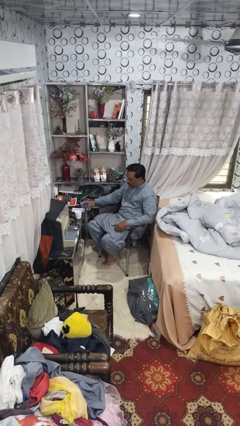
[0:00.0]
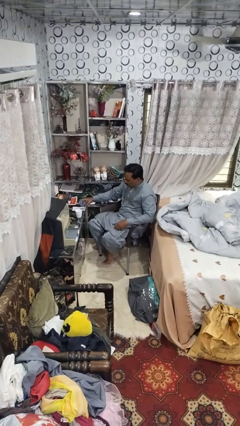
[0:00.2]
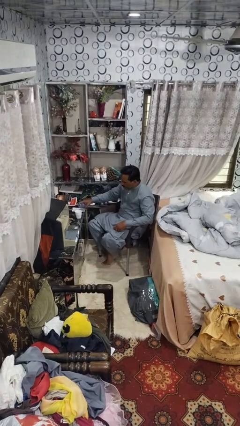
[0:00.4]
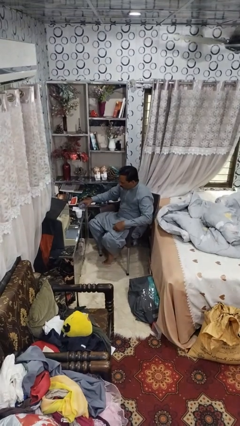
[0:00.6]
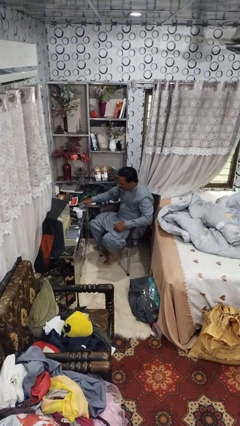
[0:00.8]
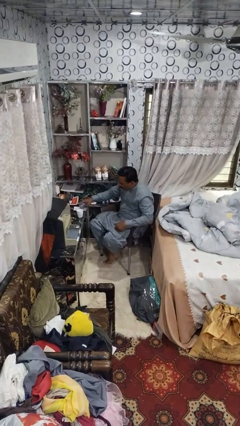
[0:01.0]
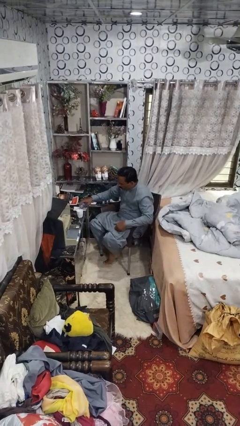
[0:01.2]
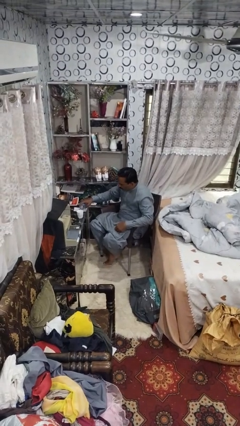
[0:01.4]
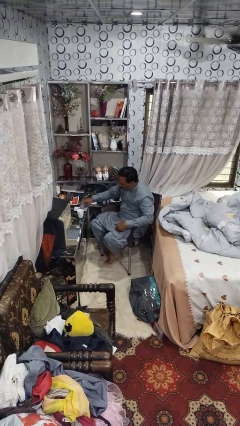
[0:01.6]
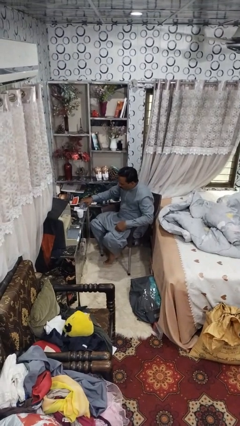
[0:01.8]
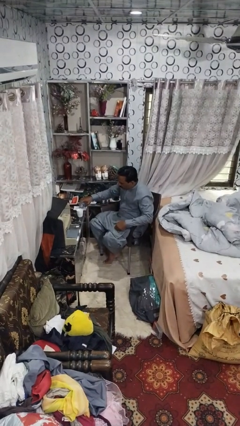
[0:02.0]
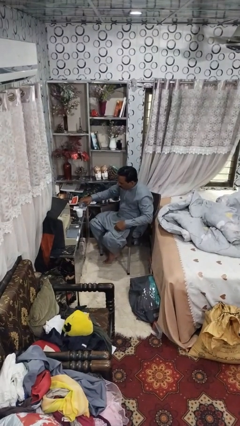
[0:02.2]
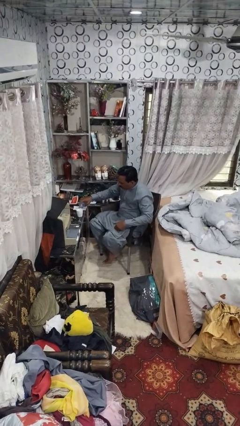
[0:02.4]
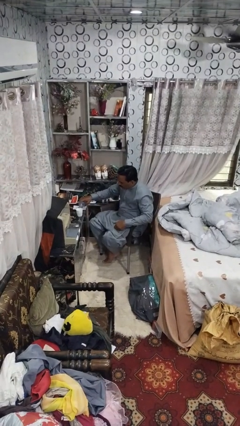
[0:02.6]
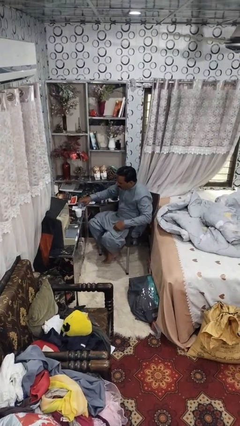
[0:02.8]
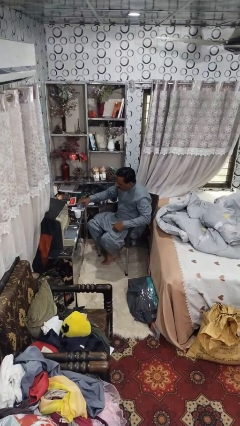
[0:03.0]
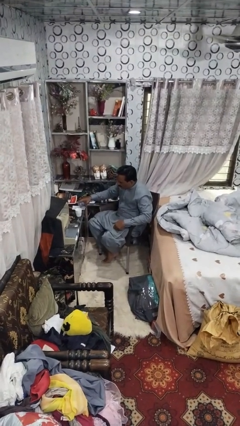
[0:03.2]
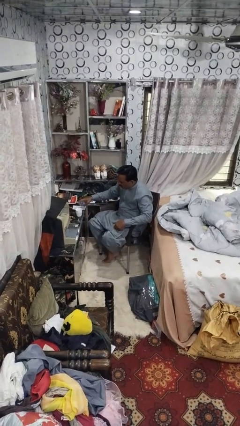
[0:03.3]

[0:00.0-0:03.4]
person pours liquid into cup

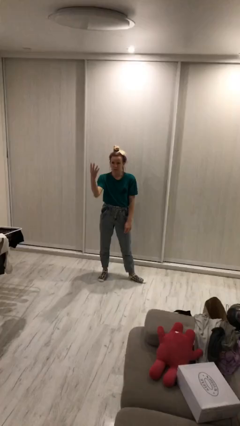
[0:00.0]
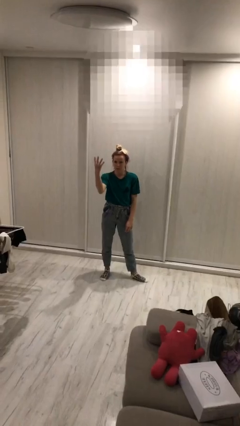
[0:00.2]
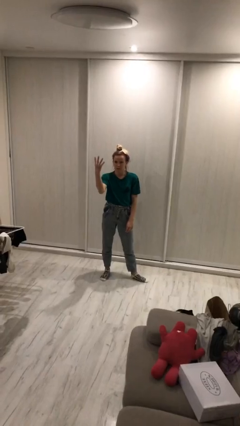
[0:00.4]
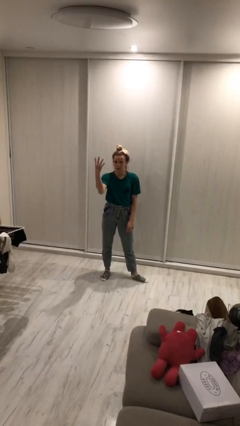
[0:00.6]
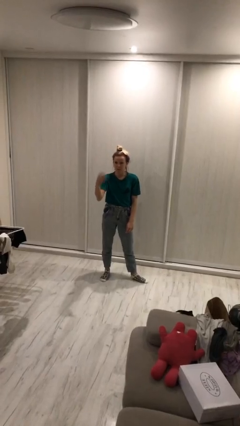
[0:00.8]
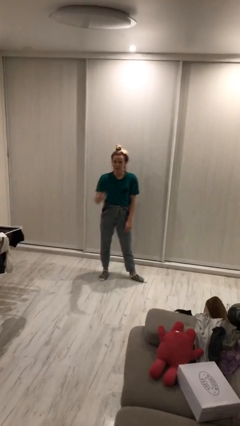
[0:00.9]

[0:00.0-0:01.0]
person gestures number four

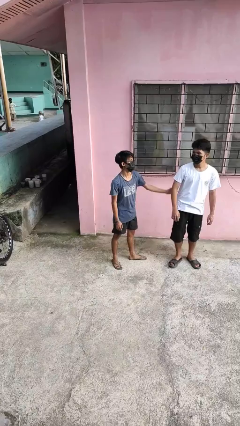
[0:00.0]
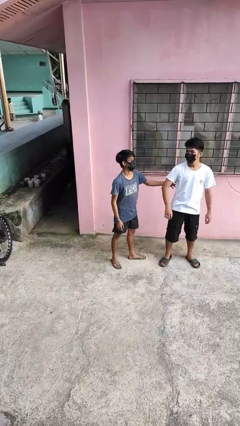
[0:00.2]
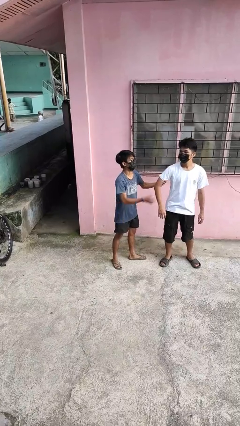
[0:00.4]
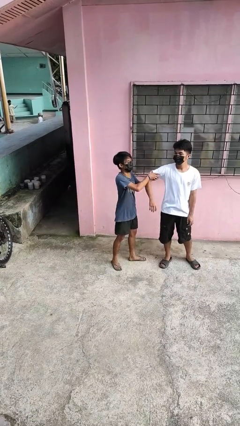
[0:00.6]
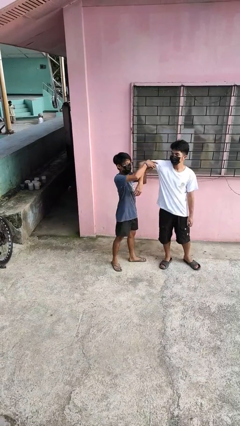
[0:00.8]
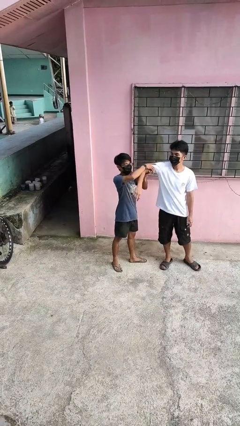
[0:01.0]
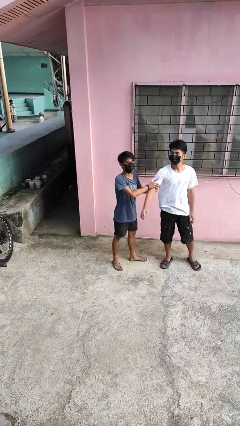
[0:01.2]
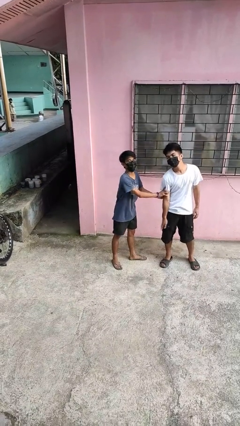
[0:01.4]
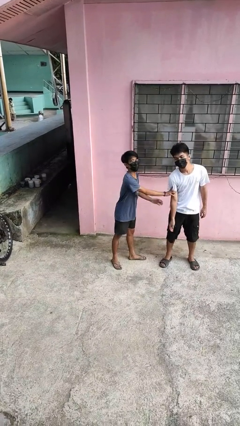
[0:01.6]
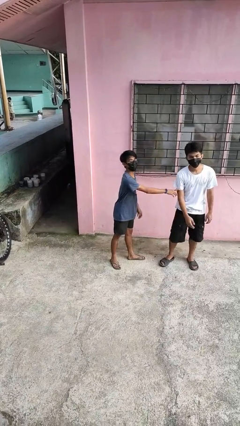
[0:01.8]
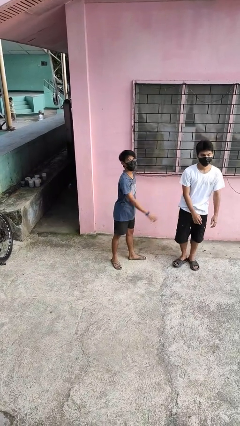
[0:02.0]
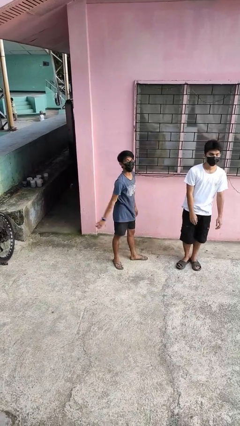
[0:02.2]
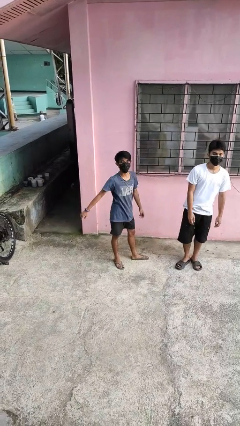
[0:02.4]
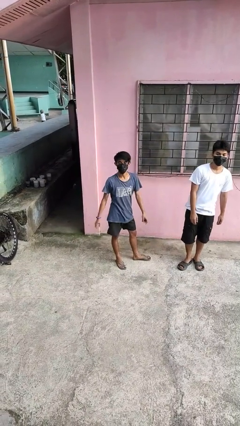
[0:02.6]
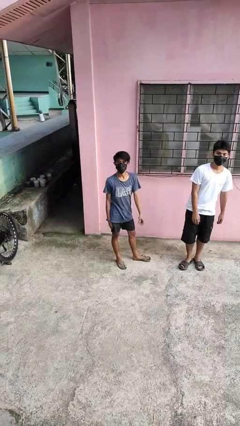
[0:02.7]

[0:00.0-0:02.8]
person grabs person by bicep

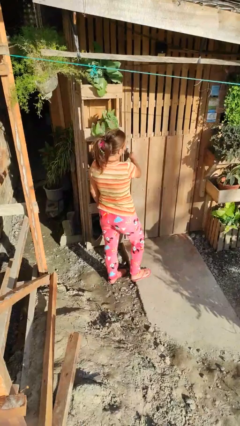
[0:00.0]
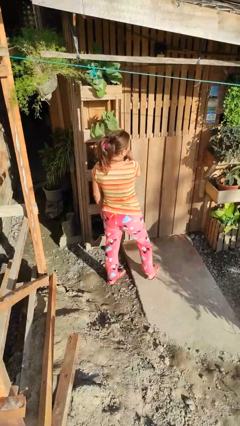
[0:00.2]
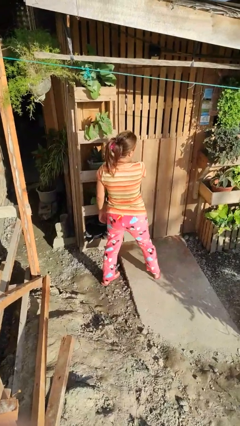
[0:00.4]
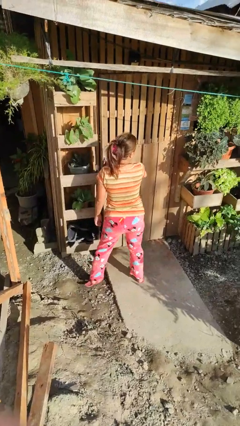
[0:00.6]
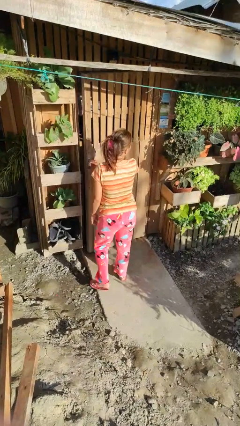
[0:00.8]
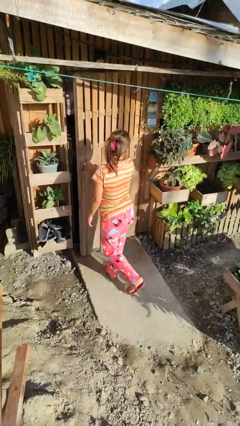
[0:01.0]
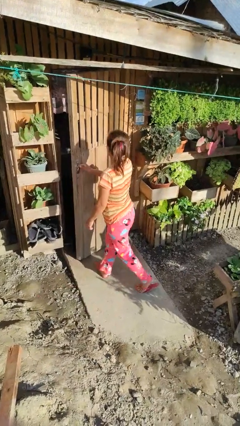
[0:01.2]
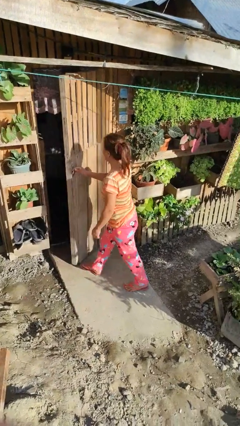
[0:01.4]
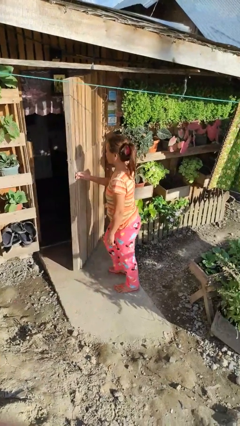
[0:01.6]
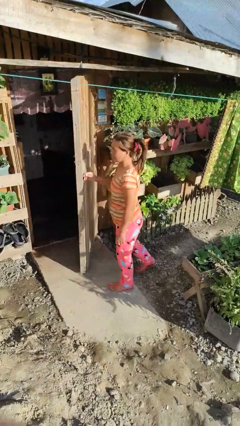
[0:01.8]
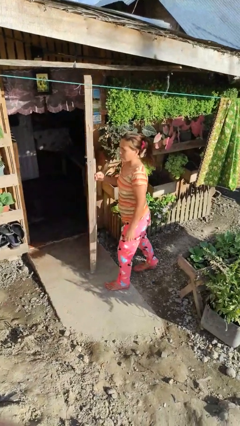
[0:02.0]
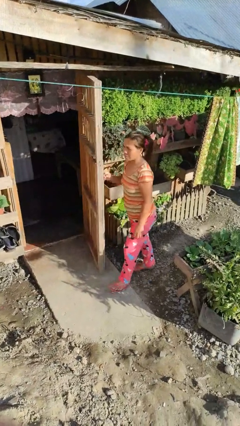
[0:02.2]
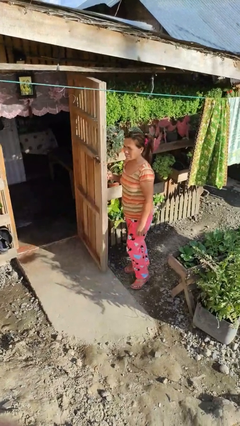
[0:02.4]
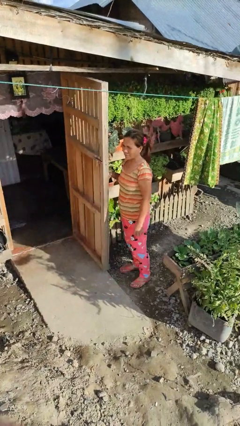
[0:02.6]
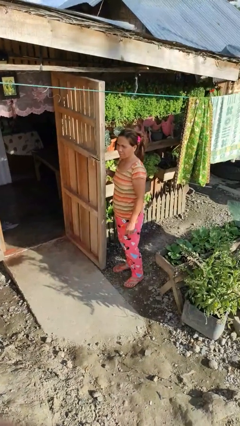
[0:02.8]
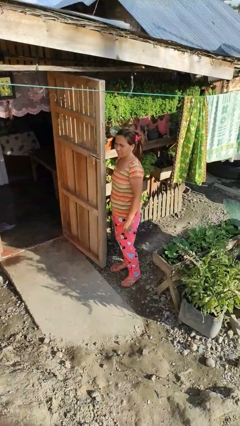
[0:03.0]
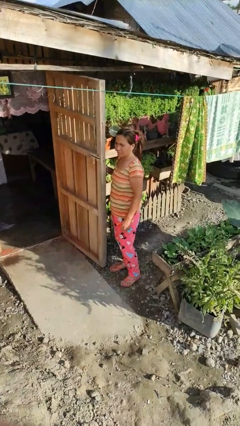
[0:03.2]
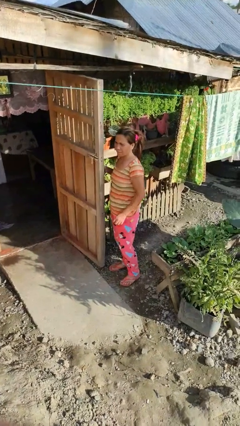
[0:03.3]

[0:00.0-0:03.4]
person opens facility door

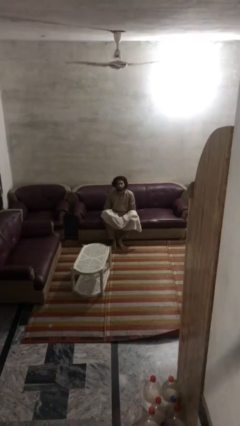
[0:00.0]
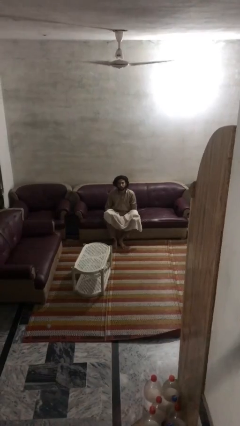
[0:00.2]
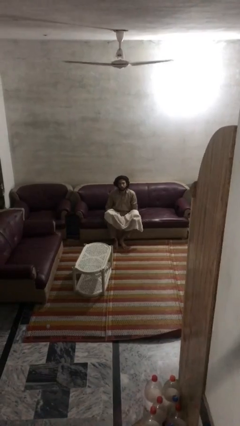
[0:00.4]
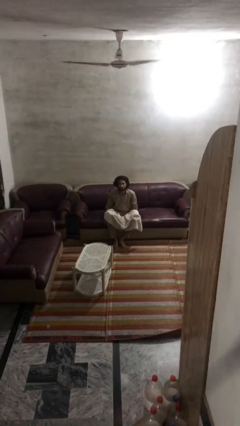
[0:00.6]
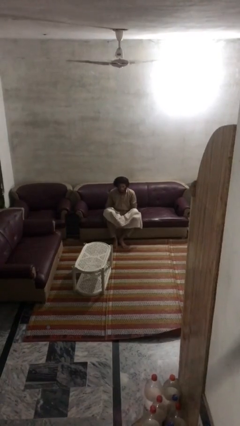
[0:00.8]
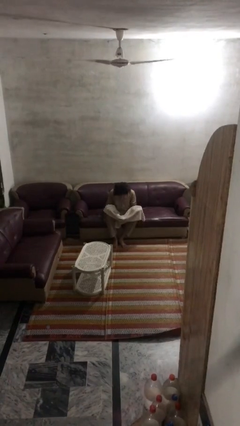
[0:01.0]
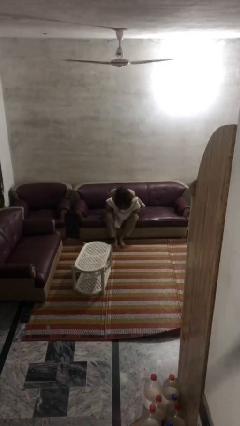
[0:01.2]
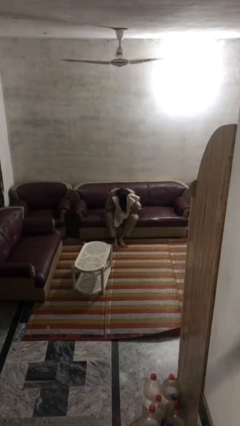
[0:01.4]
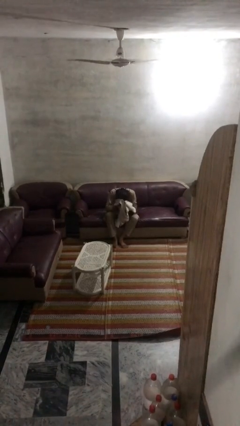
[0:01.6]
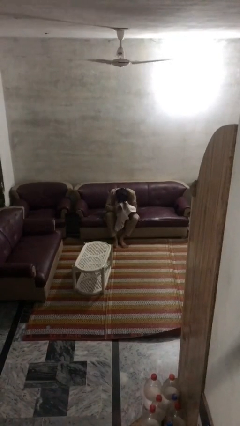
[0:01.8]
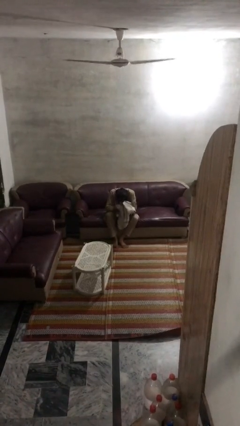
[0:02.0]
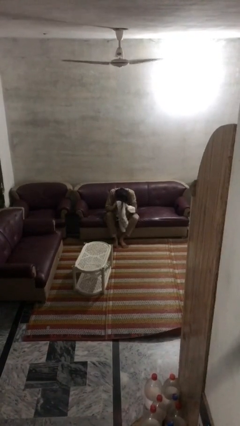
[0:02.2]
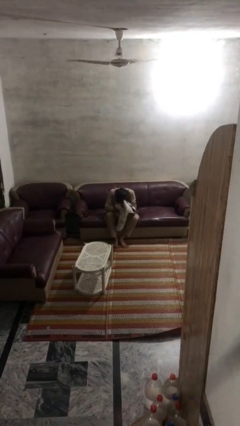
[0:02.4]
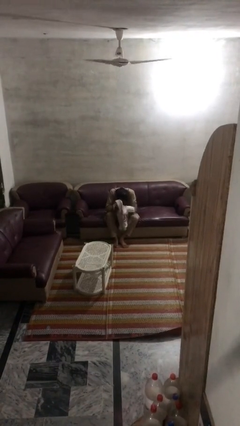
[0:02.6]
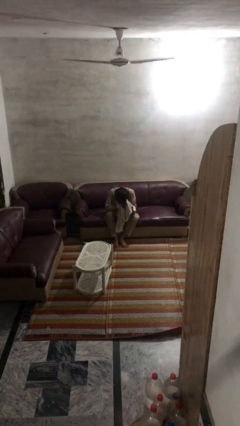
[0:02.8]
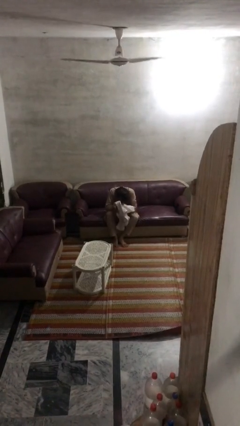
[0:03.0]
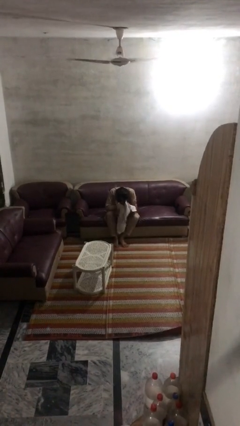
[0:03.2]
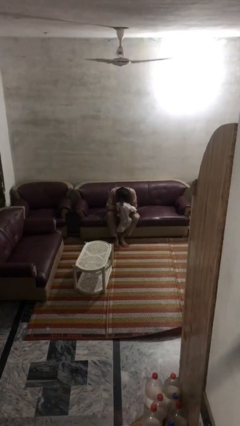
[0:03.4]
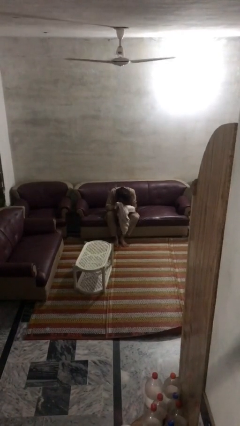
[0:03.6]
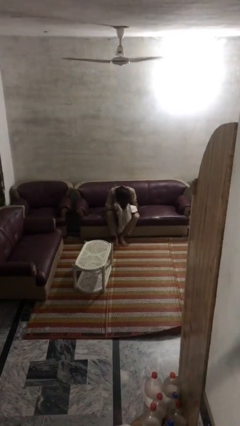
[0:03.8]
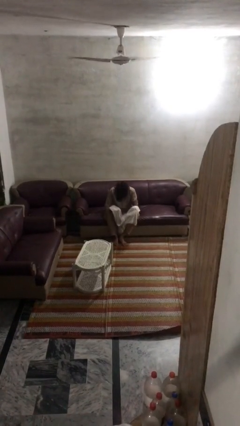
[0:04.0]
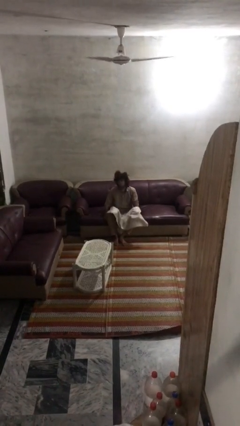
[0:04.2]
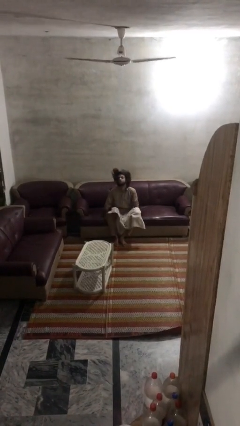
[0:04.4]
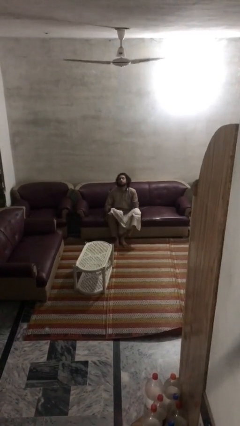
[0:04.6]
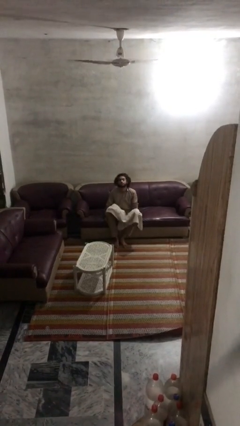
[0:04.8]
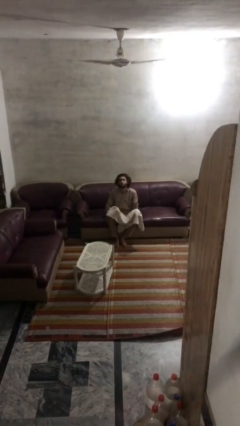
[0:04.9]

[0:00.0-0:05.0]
person dries hair with towel

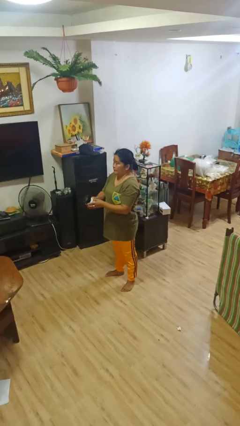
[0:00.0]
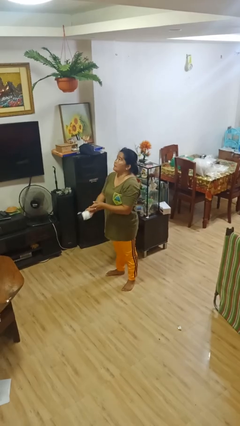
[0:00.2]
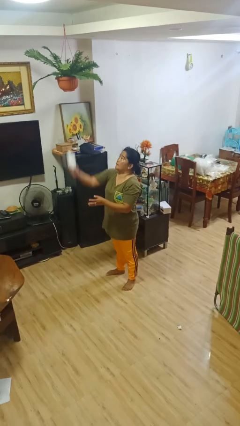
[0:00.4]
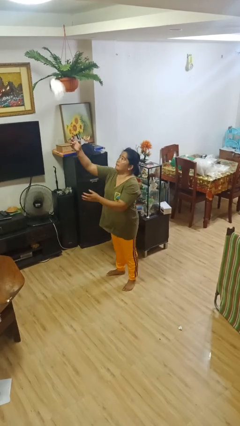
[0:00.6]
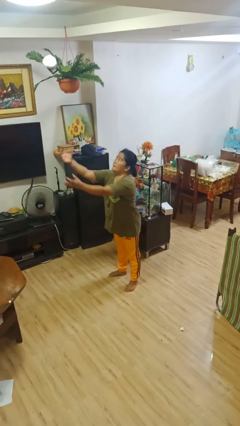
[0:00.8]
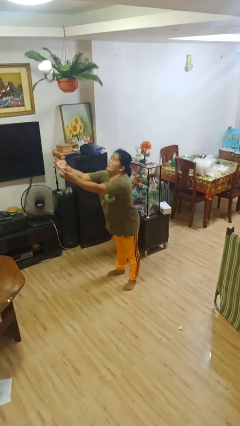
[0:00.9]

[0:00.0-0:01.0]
person drops object

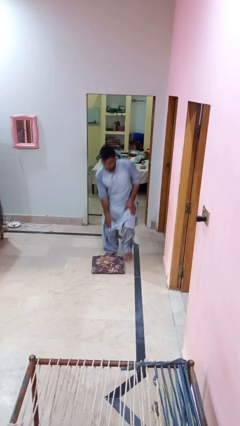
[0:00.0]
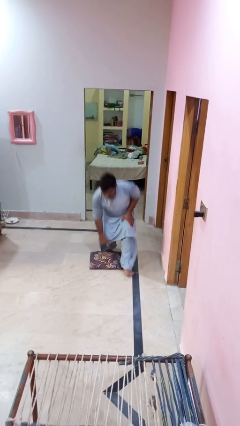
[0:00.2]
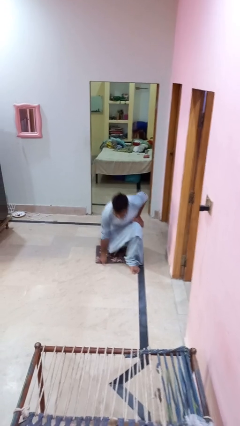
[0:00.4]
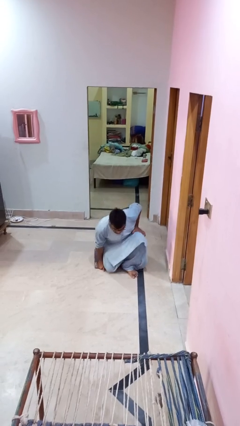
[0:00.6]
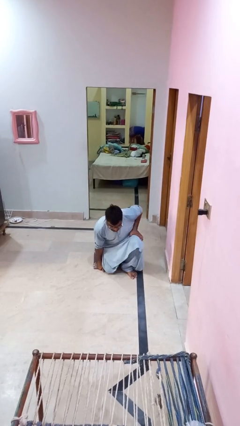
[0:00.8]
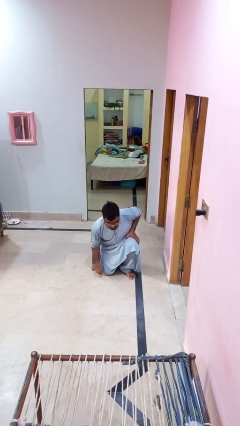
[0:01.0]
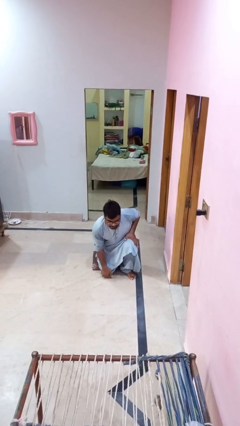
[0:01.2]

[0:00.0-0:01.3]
person trips on object on floor
